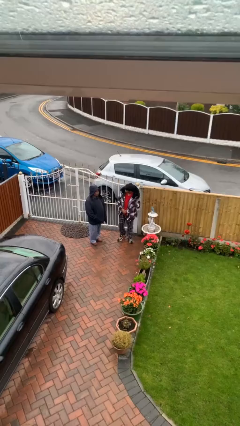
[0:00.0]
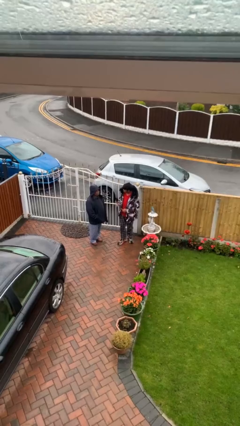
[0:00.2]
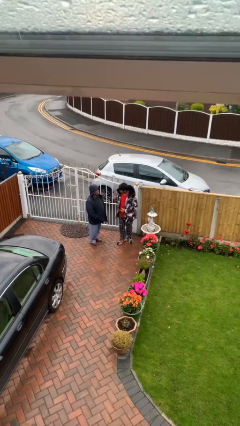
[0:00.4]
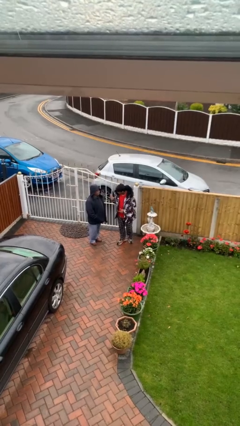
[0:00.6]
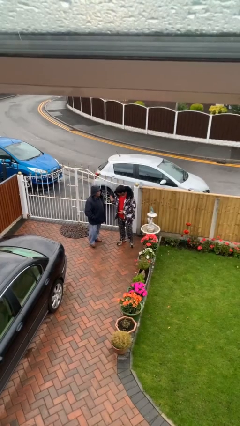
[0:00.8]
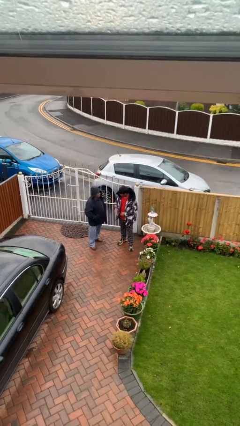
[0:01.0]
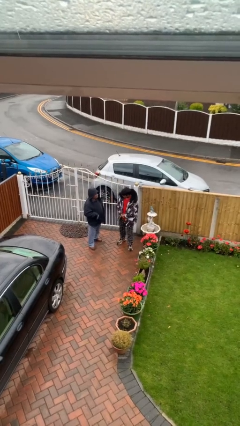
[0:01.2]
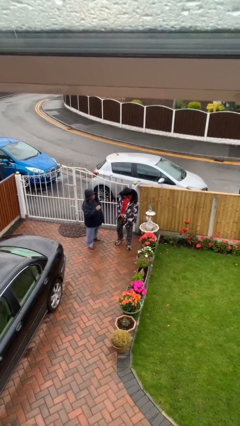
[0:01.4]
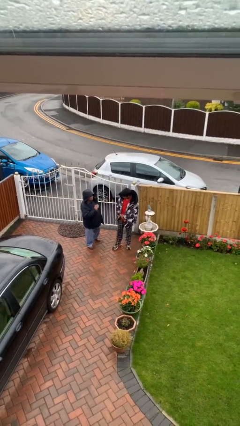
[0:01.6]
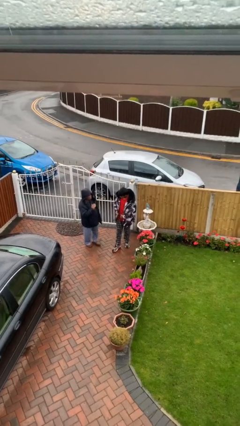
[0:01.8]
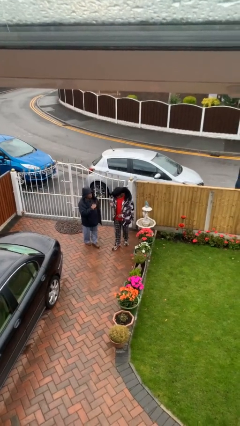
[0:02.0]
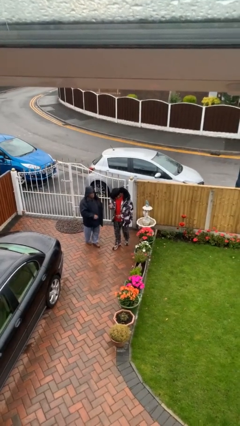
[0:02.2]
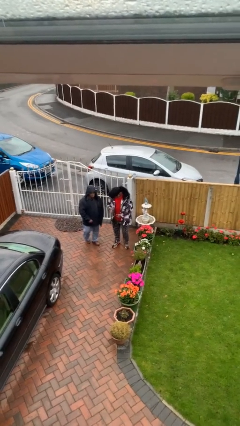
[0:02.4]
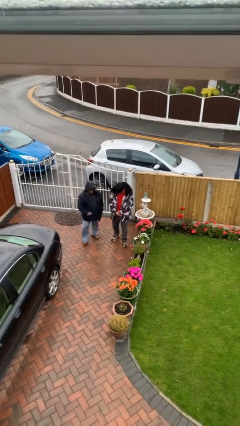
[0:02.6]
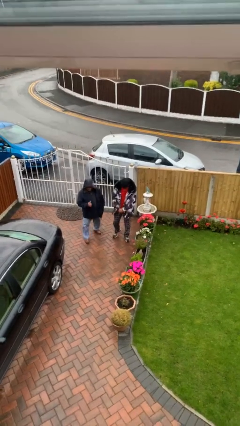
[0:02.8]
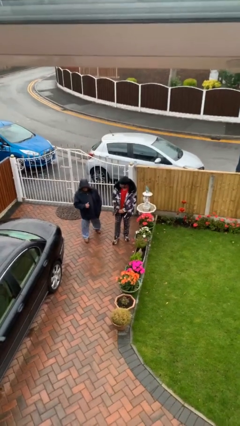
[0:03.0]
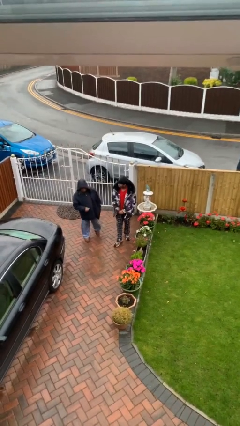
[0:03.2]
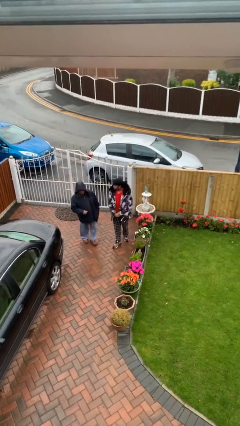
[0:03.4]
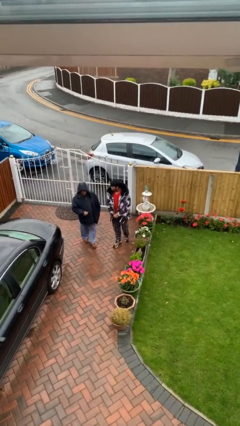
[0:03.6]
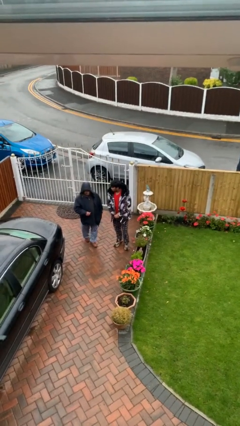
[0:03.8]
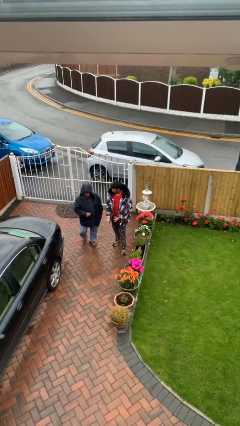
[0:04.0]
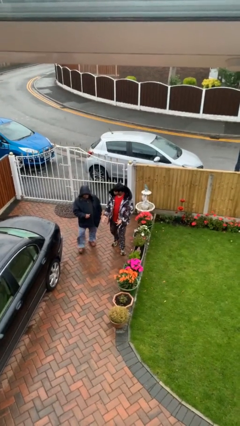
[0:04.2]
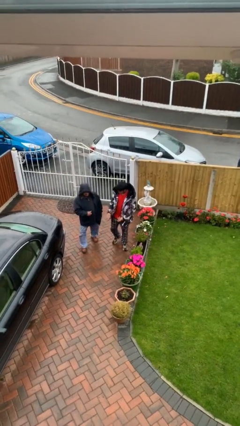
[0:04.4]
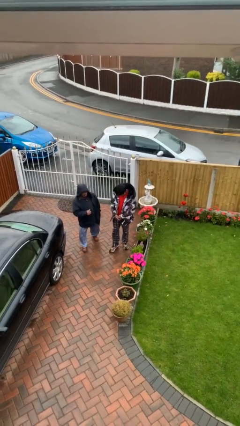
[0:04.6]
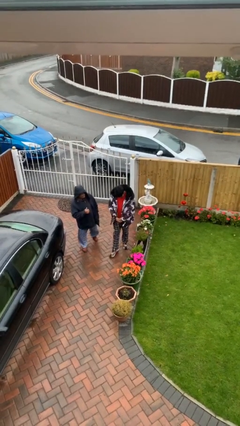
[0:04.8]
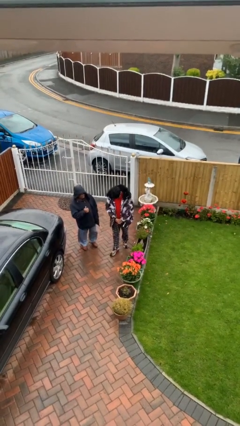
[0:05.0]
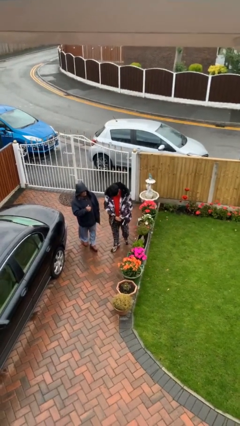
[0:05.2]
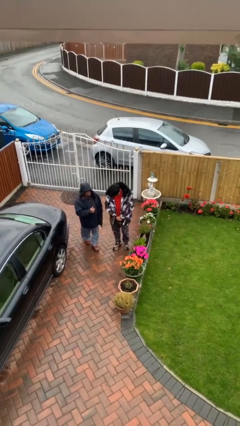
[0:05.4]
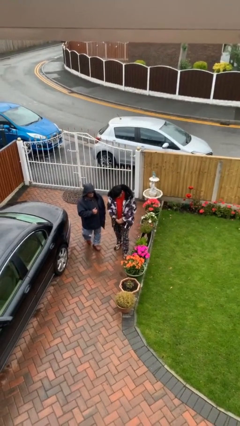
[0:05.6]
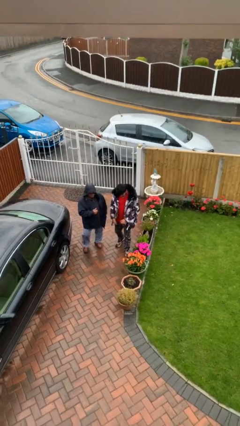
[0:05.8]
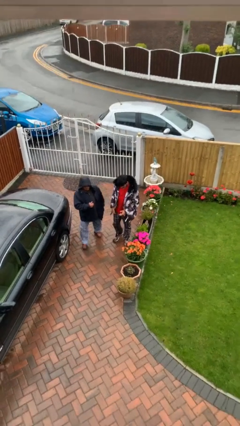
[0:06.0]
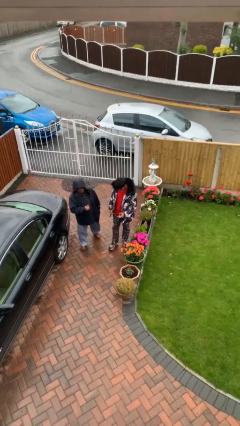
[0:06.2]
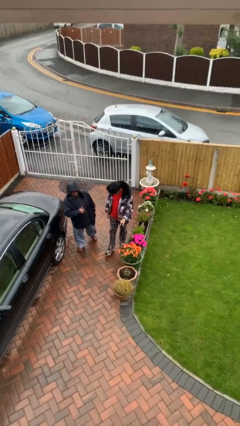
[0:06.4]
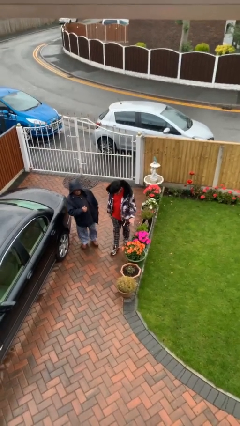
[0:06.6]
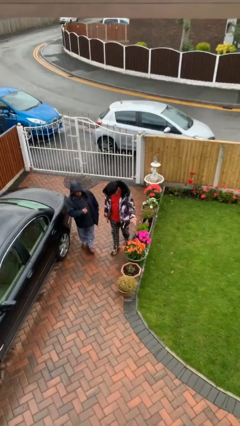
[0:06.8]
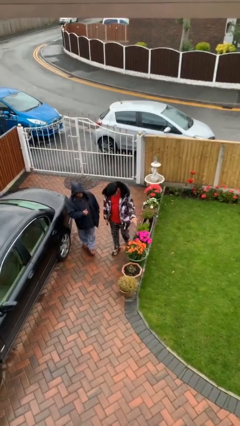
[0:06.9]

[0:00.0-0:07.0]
person talks to person

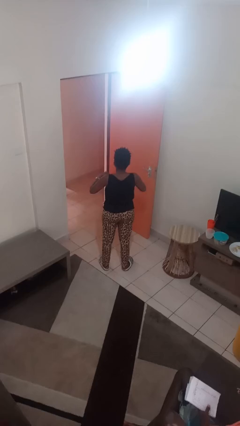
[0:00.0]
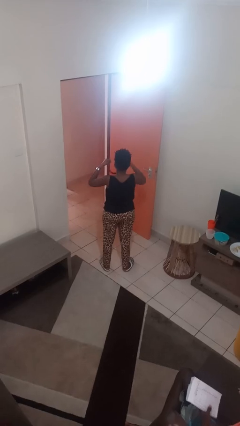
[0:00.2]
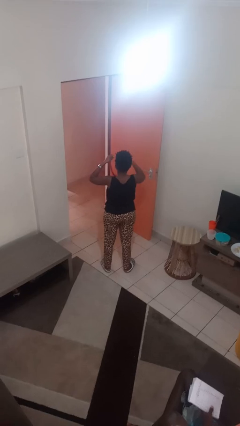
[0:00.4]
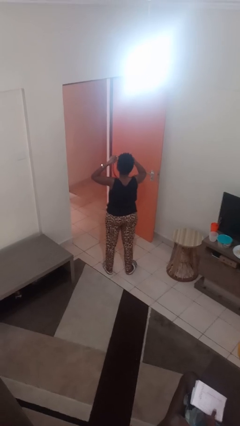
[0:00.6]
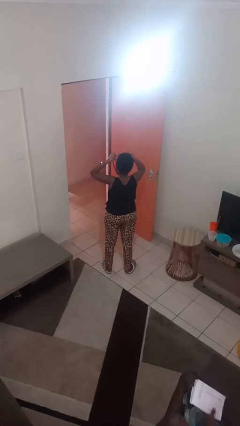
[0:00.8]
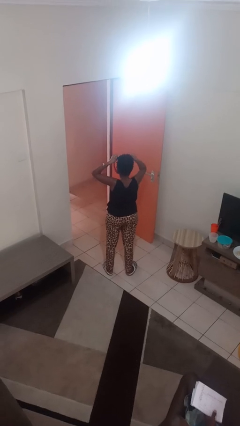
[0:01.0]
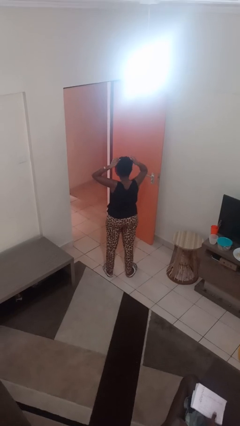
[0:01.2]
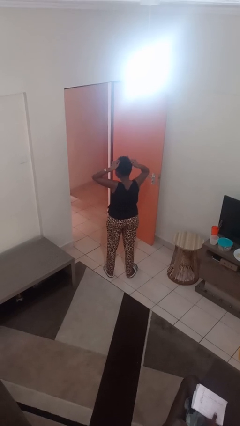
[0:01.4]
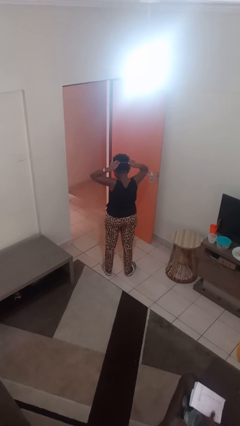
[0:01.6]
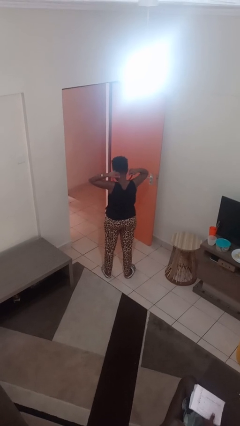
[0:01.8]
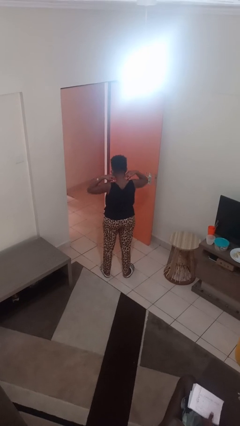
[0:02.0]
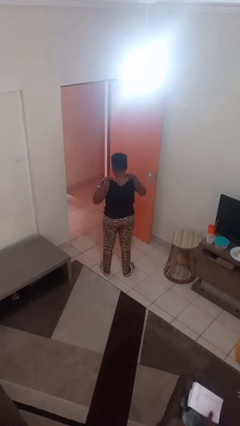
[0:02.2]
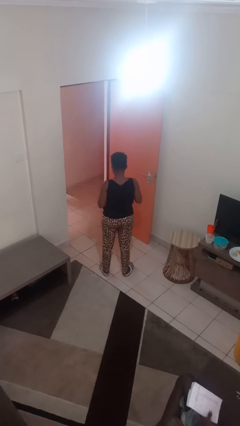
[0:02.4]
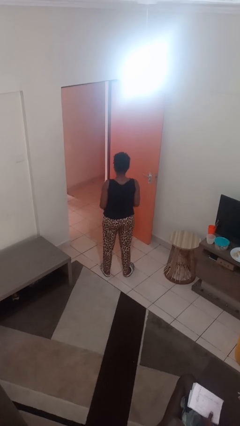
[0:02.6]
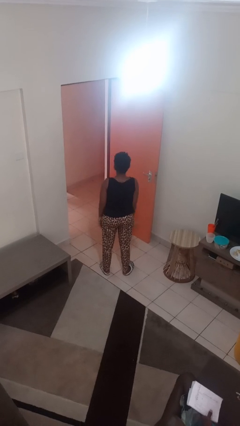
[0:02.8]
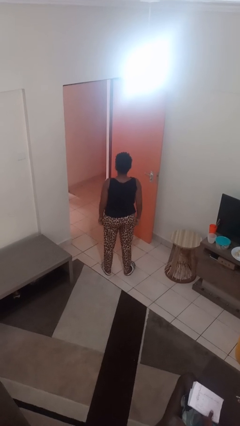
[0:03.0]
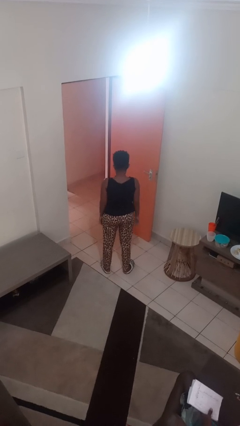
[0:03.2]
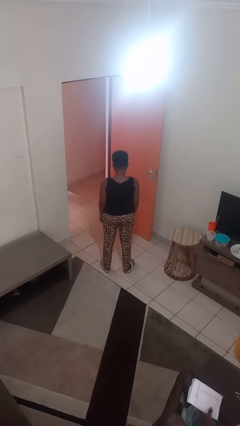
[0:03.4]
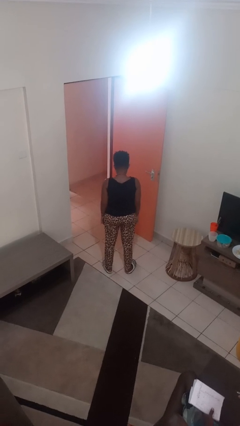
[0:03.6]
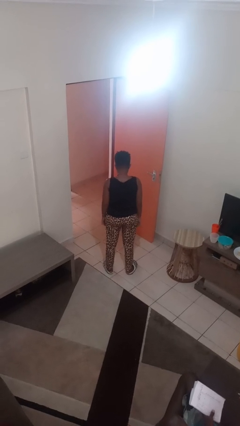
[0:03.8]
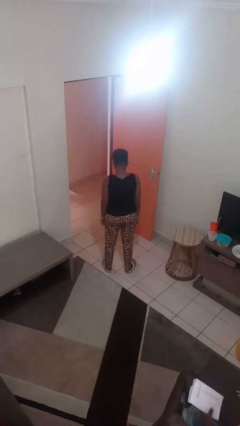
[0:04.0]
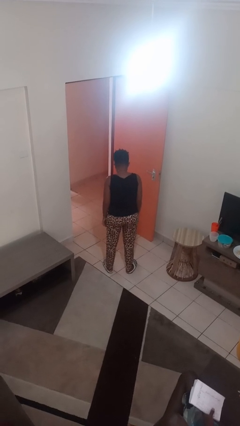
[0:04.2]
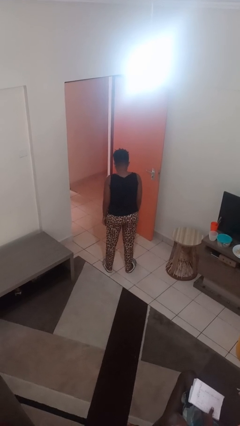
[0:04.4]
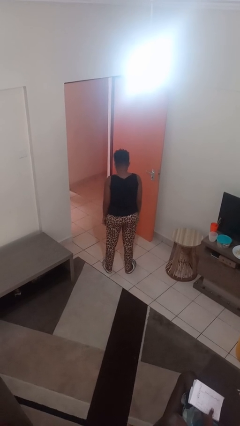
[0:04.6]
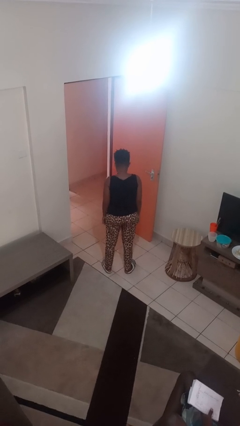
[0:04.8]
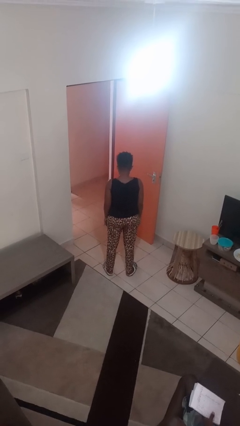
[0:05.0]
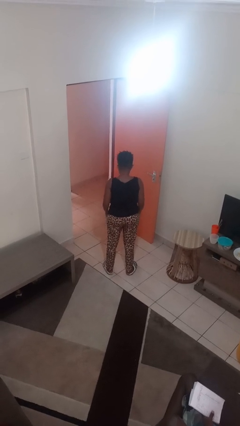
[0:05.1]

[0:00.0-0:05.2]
person puts on necklace

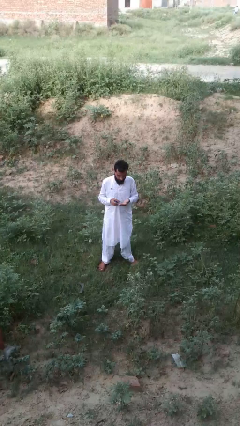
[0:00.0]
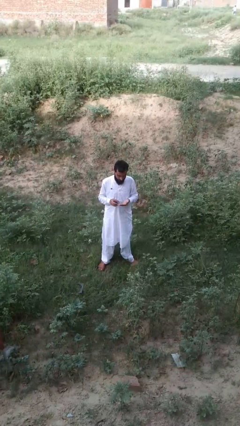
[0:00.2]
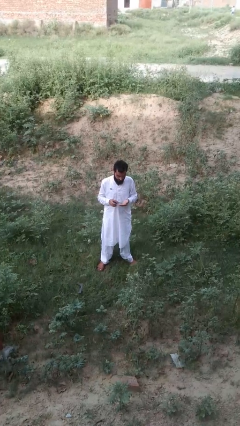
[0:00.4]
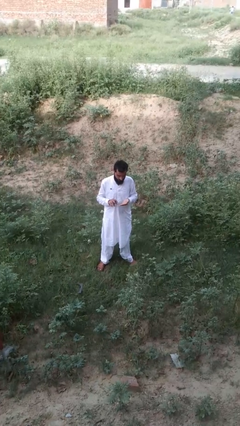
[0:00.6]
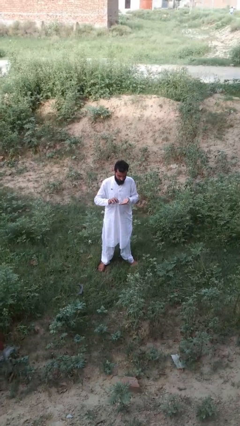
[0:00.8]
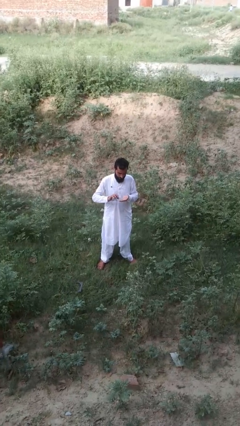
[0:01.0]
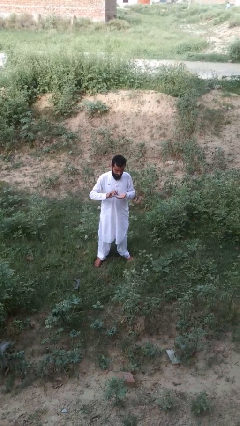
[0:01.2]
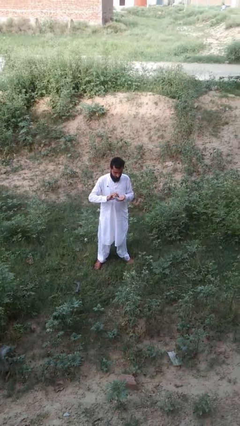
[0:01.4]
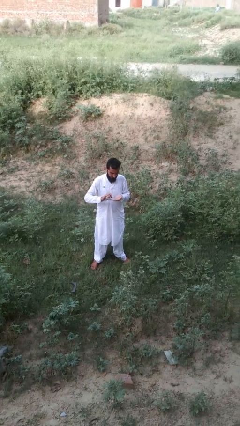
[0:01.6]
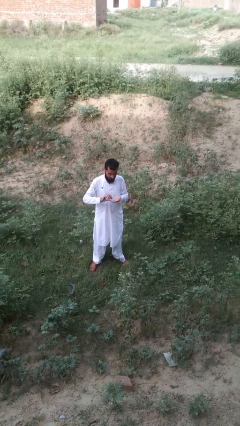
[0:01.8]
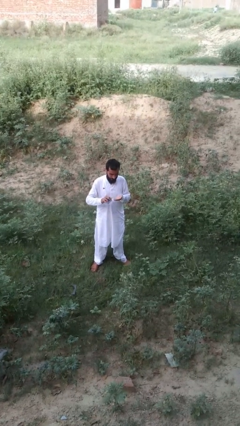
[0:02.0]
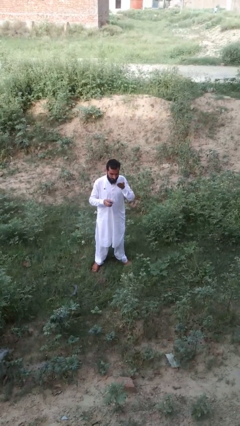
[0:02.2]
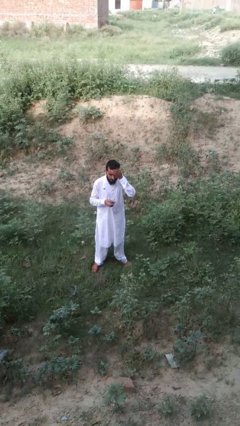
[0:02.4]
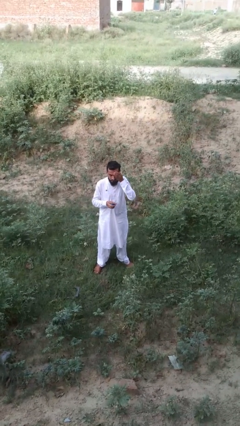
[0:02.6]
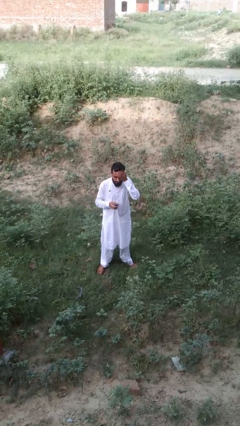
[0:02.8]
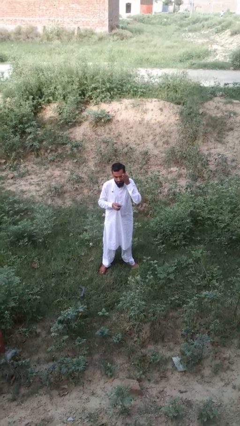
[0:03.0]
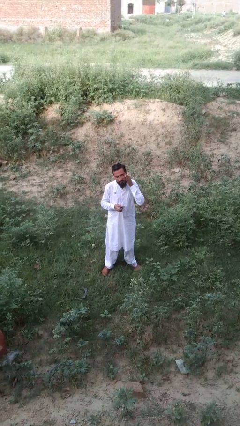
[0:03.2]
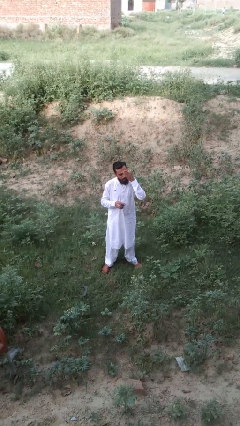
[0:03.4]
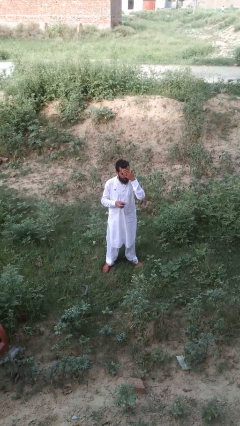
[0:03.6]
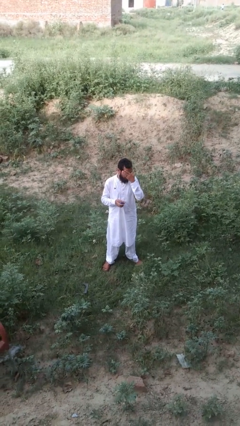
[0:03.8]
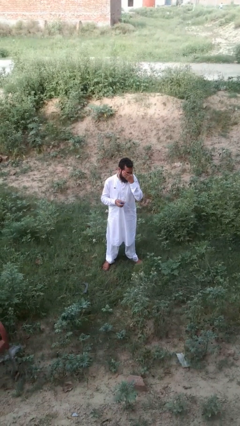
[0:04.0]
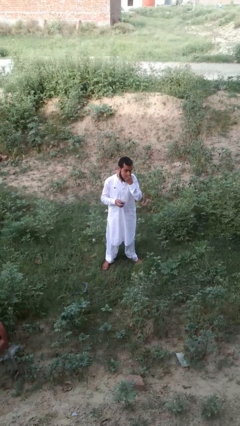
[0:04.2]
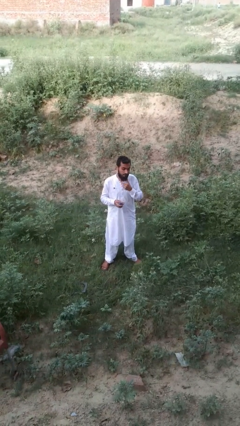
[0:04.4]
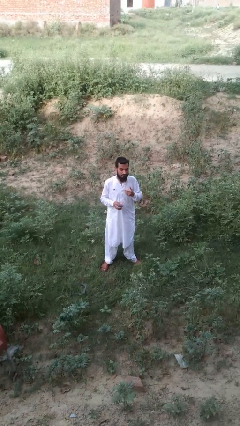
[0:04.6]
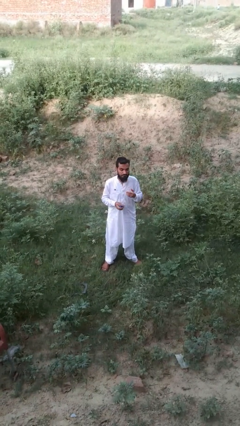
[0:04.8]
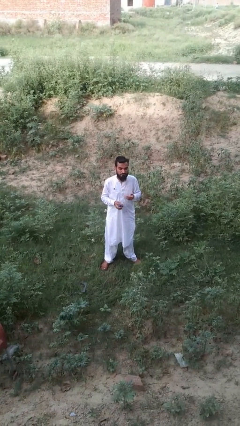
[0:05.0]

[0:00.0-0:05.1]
person applies sunscreen

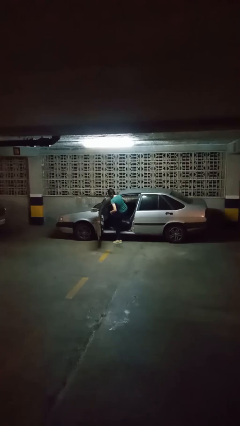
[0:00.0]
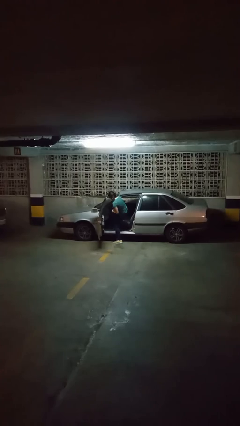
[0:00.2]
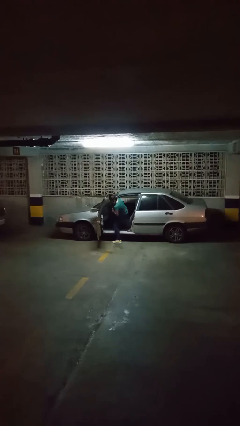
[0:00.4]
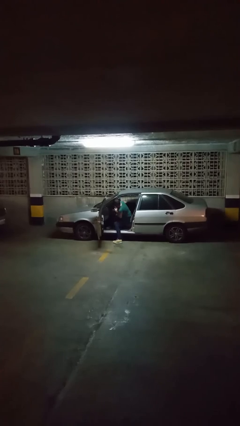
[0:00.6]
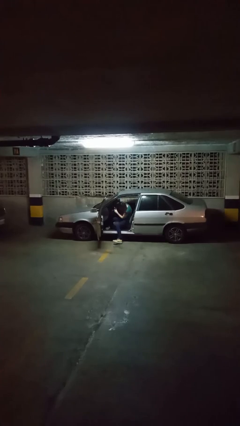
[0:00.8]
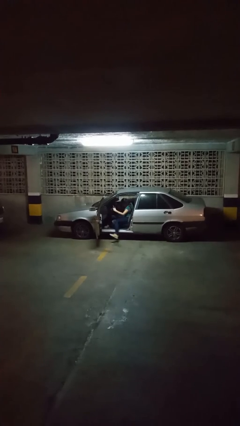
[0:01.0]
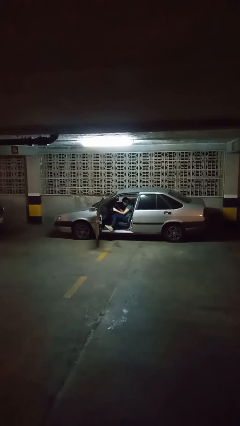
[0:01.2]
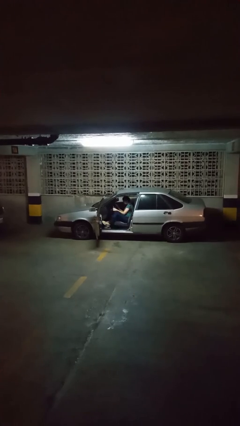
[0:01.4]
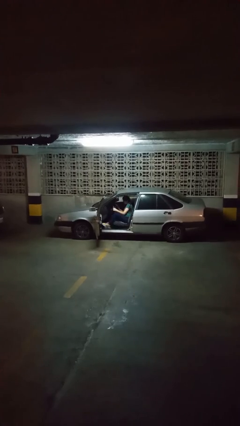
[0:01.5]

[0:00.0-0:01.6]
person enters car
